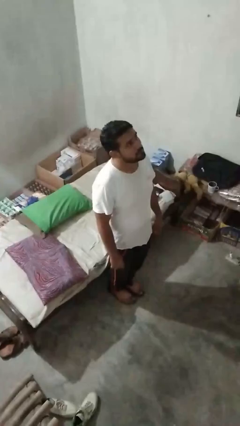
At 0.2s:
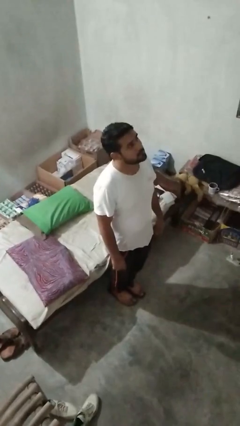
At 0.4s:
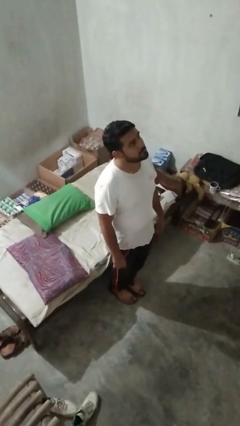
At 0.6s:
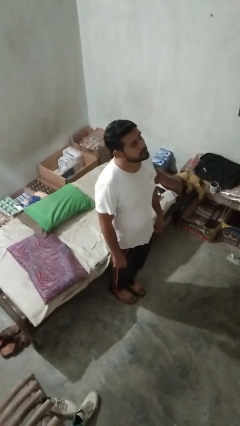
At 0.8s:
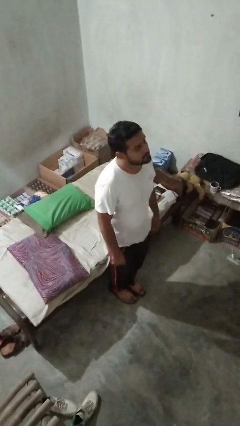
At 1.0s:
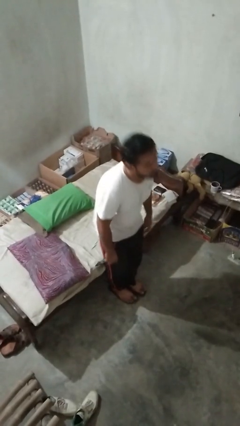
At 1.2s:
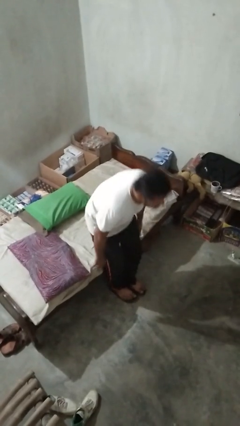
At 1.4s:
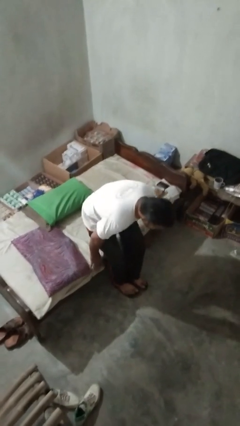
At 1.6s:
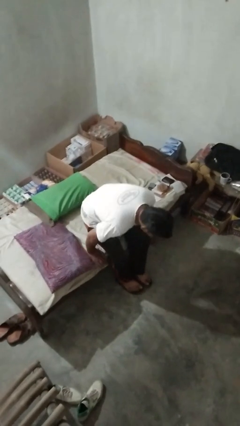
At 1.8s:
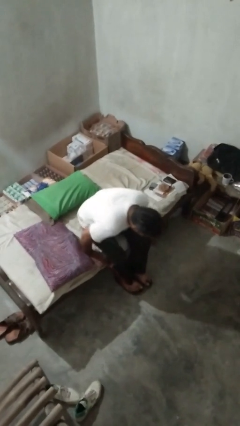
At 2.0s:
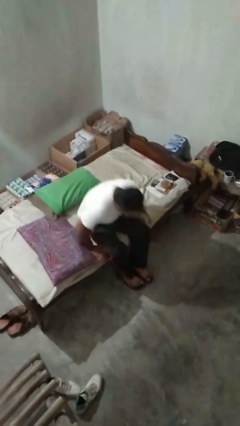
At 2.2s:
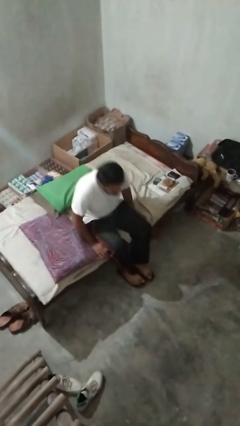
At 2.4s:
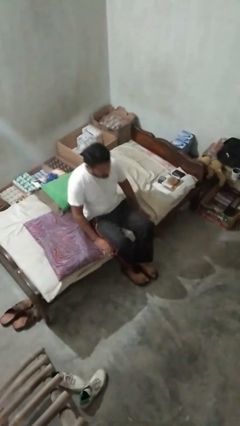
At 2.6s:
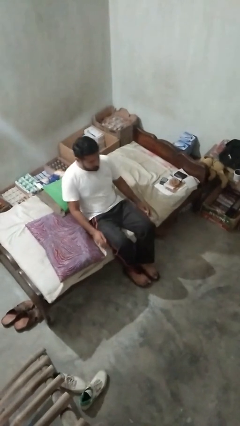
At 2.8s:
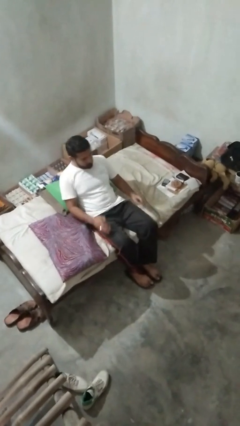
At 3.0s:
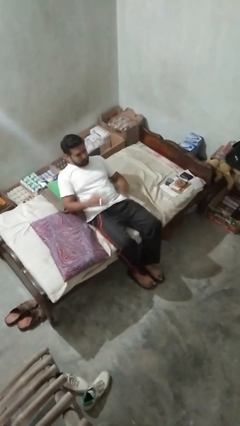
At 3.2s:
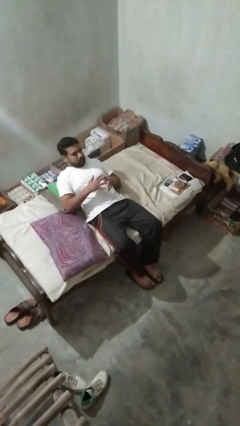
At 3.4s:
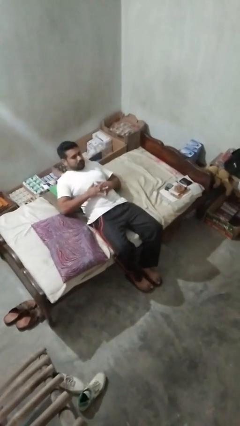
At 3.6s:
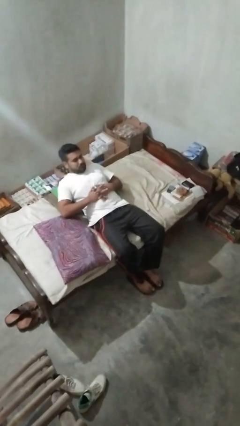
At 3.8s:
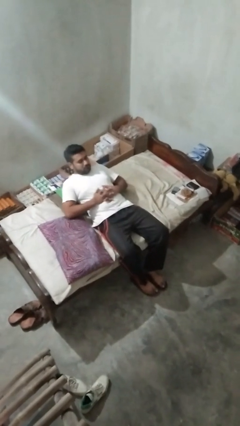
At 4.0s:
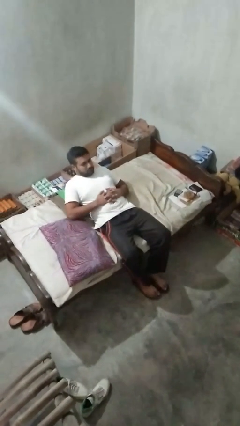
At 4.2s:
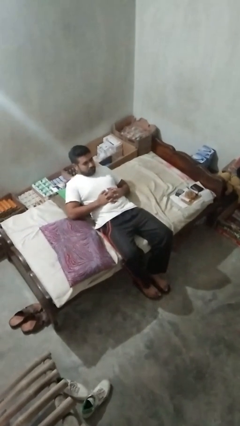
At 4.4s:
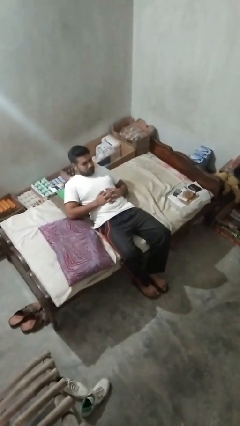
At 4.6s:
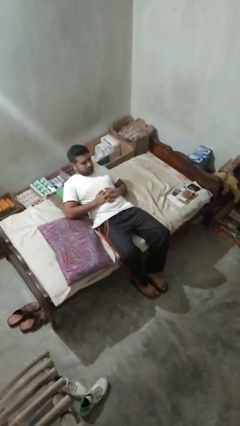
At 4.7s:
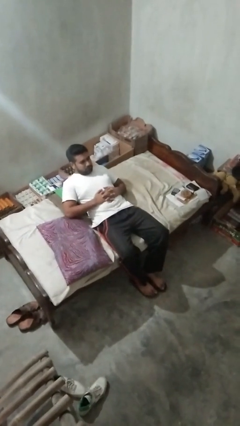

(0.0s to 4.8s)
person lies down on couch

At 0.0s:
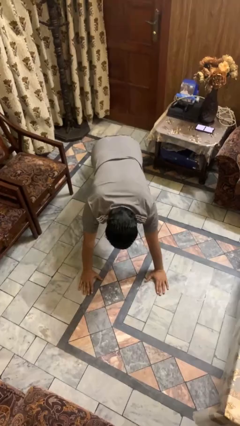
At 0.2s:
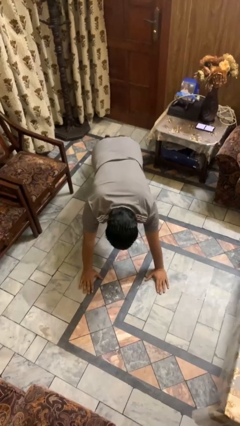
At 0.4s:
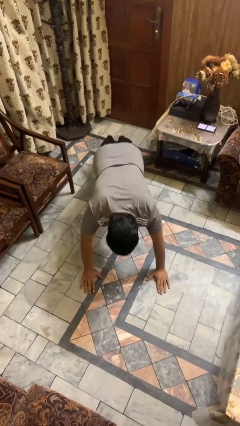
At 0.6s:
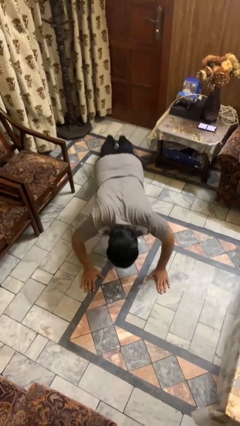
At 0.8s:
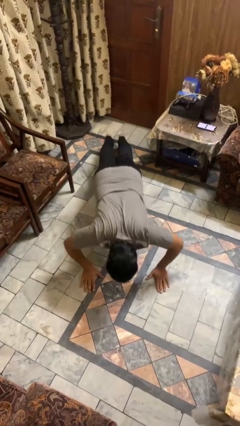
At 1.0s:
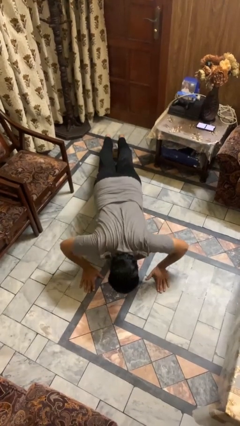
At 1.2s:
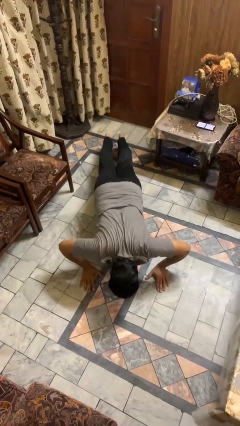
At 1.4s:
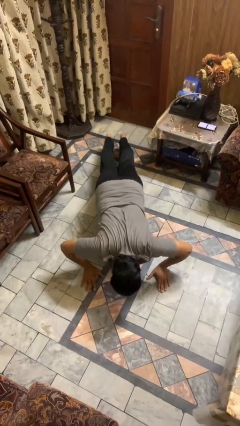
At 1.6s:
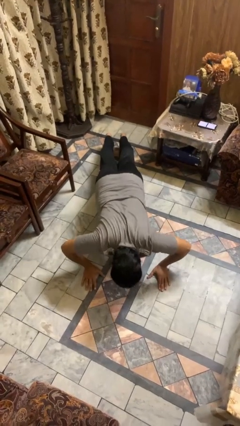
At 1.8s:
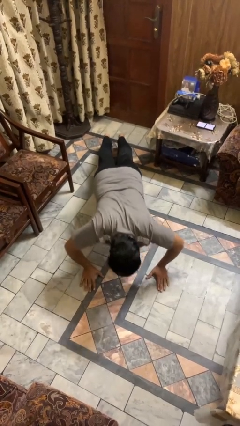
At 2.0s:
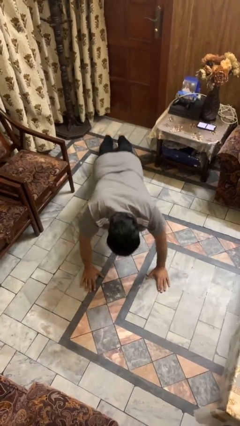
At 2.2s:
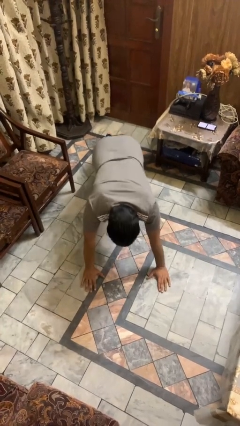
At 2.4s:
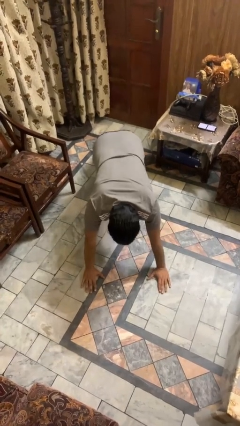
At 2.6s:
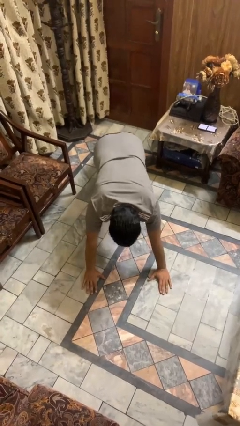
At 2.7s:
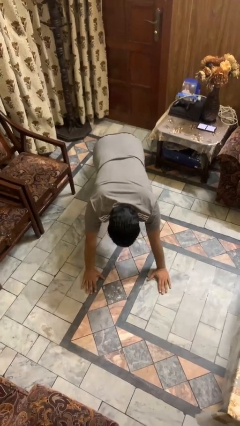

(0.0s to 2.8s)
person exercises with pushup

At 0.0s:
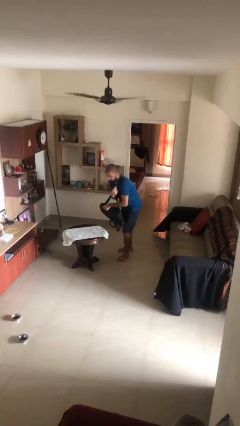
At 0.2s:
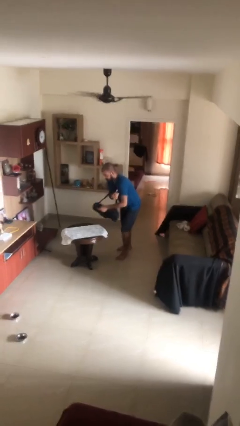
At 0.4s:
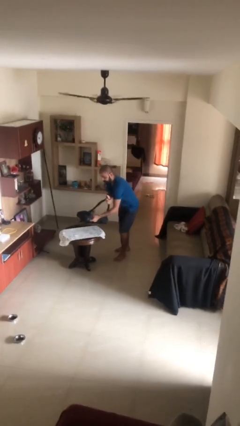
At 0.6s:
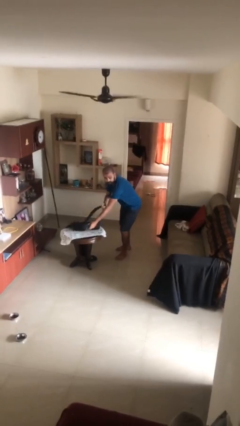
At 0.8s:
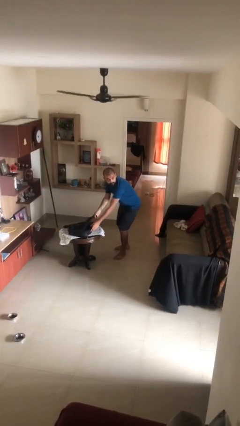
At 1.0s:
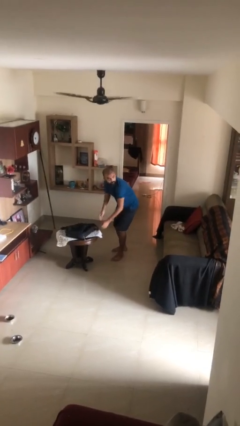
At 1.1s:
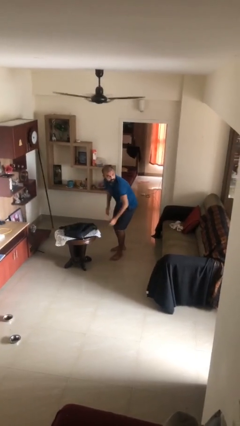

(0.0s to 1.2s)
person puts down object on table

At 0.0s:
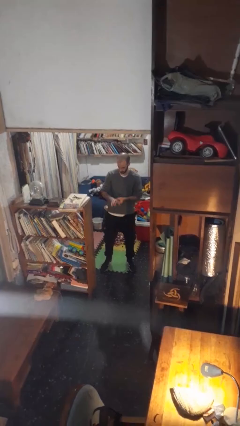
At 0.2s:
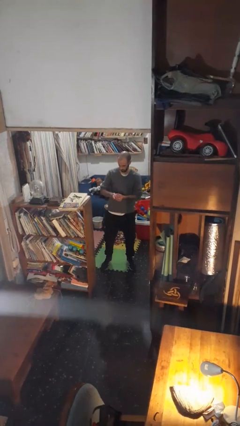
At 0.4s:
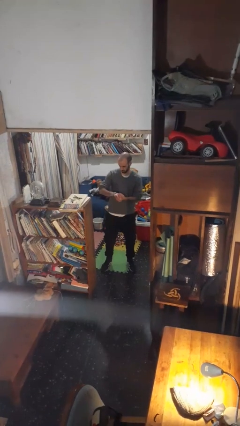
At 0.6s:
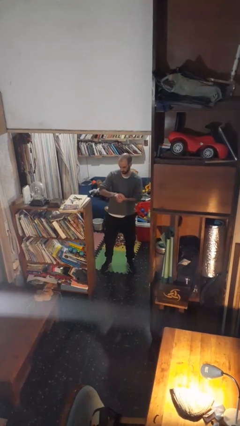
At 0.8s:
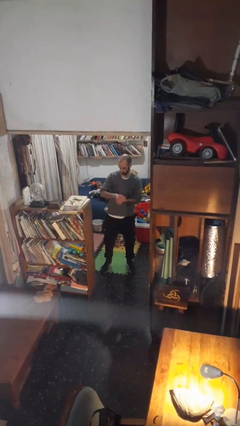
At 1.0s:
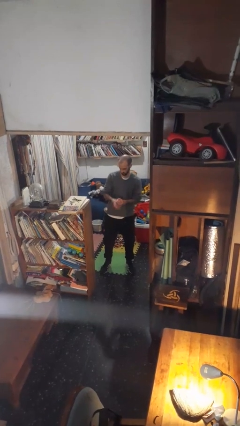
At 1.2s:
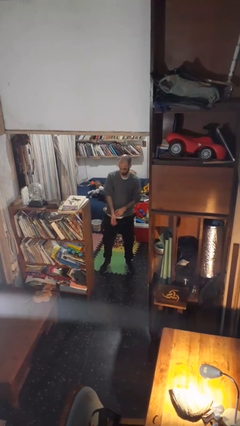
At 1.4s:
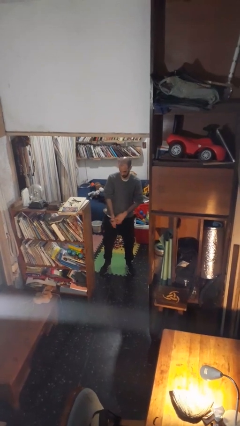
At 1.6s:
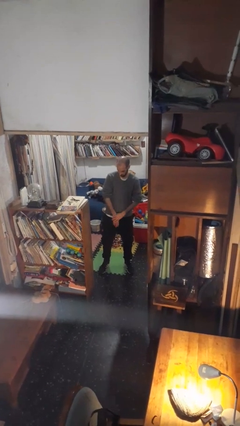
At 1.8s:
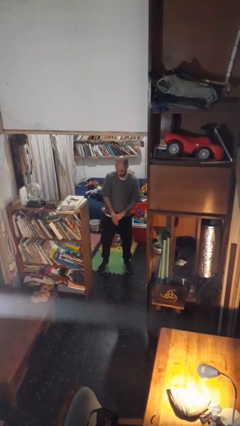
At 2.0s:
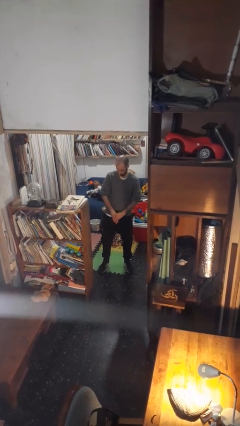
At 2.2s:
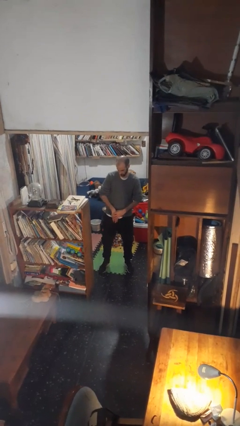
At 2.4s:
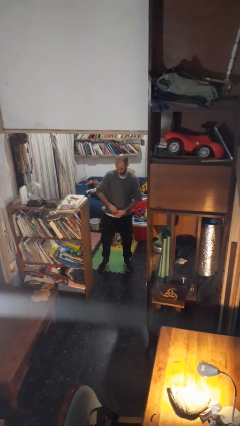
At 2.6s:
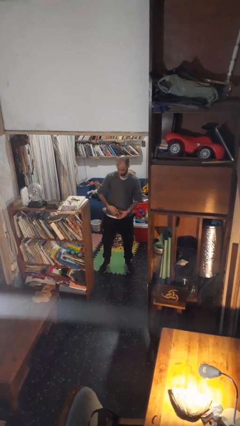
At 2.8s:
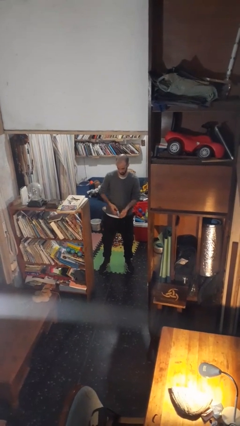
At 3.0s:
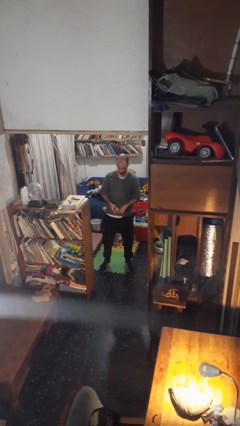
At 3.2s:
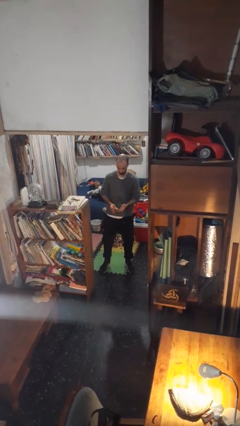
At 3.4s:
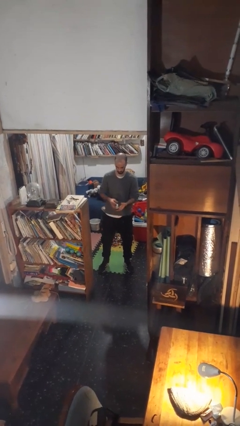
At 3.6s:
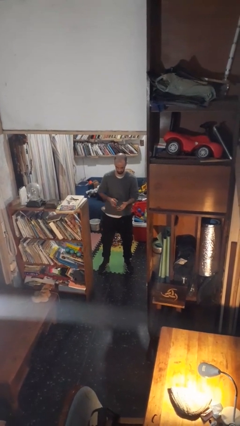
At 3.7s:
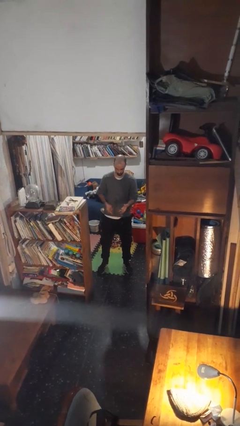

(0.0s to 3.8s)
person takes off wristwatch

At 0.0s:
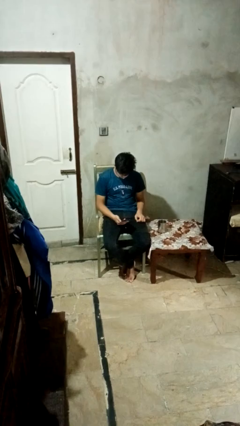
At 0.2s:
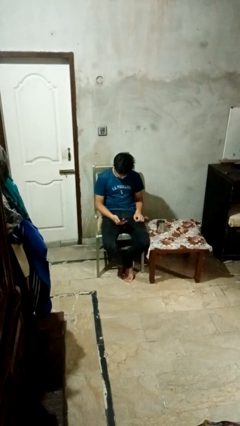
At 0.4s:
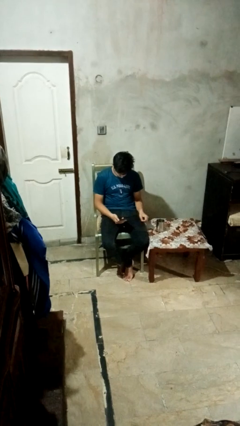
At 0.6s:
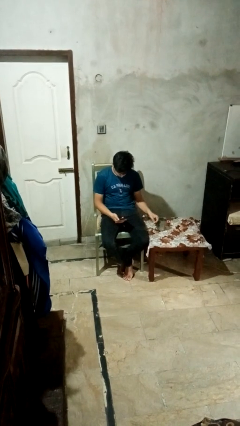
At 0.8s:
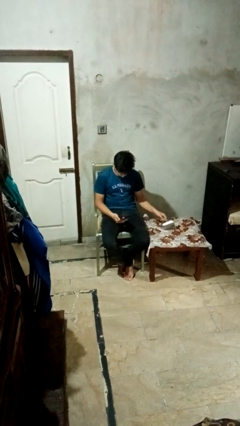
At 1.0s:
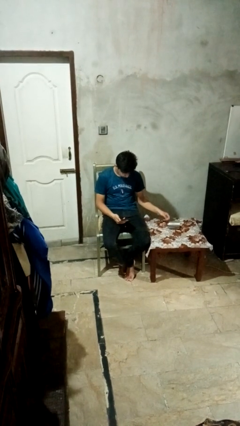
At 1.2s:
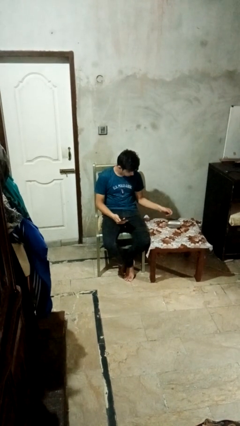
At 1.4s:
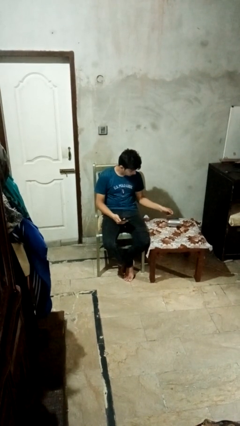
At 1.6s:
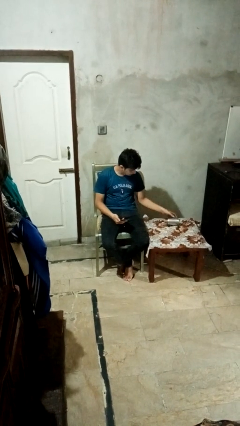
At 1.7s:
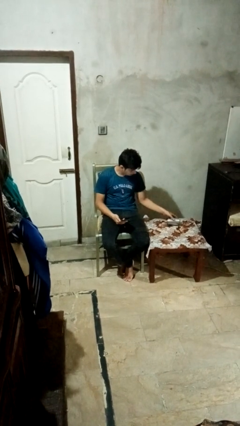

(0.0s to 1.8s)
person knocks over glass

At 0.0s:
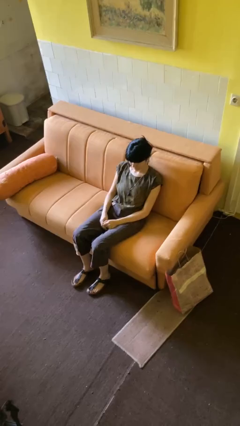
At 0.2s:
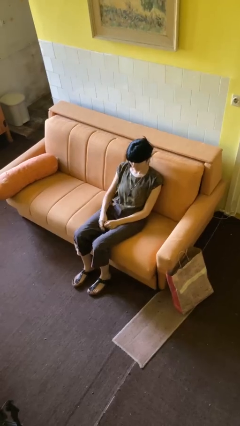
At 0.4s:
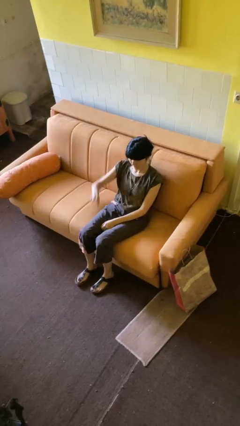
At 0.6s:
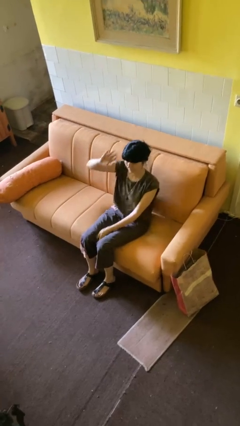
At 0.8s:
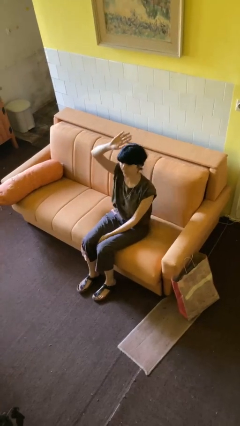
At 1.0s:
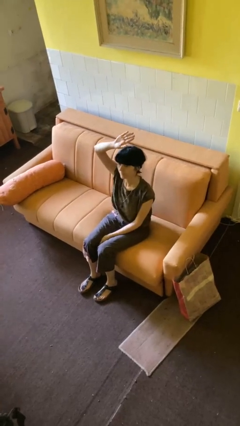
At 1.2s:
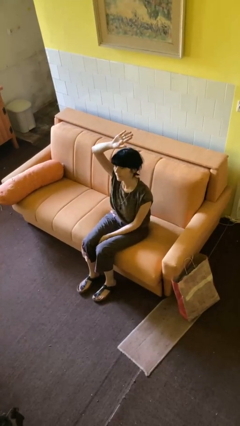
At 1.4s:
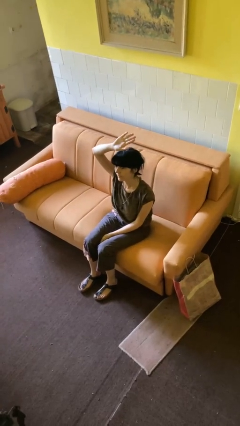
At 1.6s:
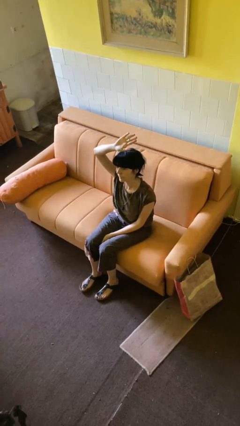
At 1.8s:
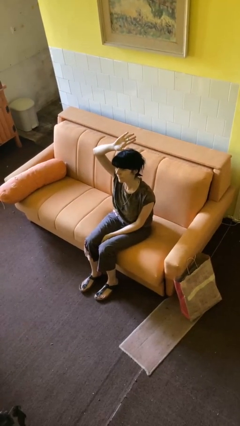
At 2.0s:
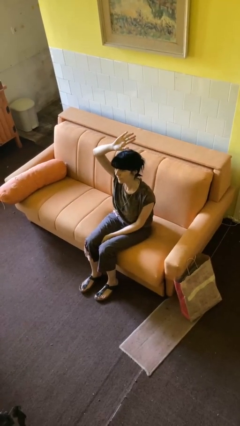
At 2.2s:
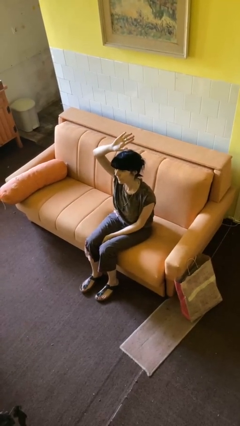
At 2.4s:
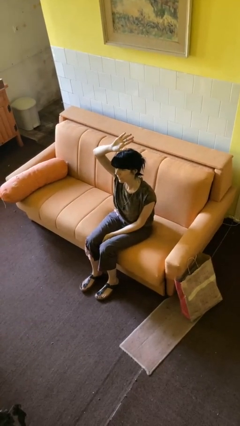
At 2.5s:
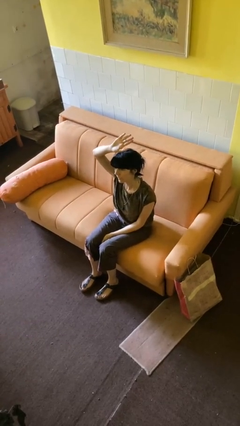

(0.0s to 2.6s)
person gestures raise hand

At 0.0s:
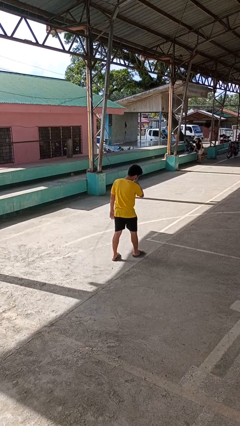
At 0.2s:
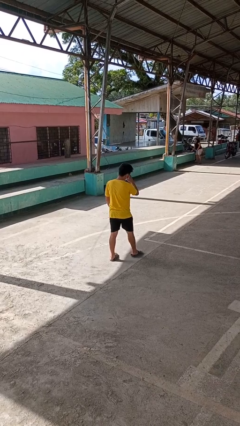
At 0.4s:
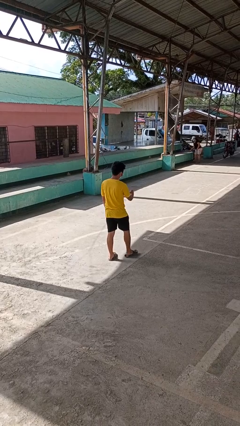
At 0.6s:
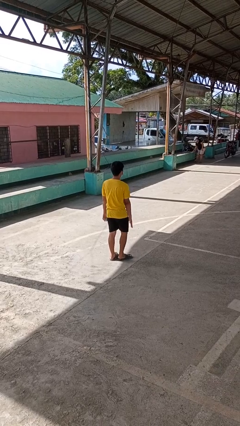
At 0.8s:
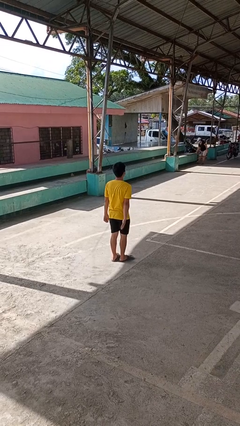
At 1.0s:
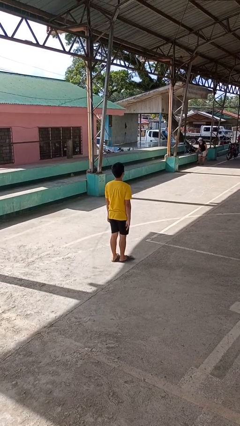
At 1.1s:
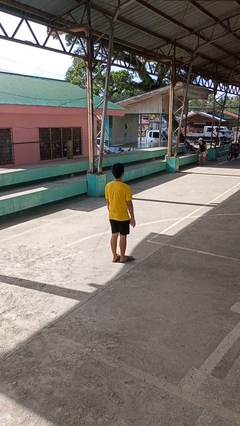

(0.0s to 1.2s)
person karate chop
